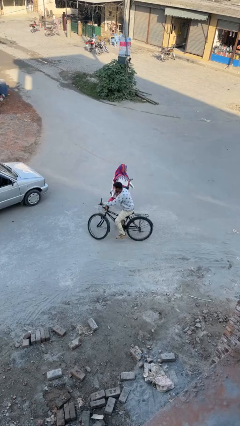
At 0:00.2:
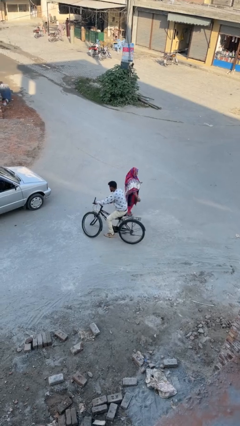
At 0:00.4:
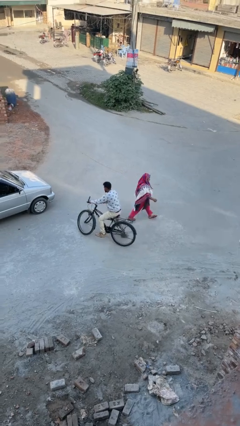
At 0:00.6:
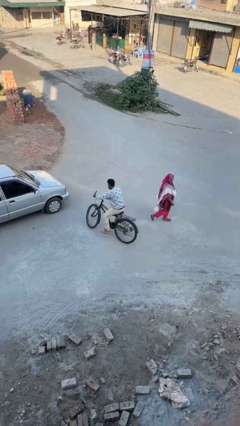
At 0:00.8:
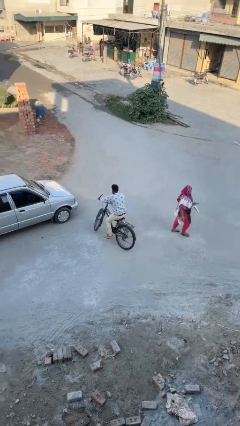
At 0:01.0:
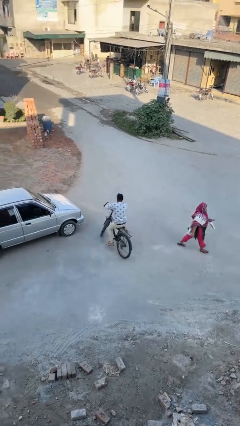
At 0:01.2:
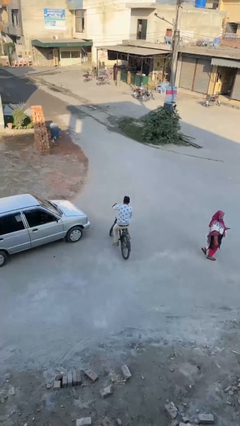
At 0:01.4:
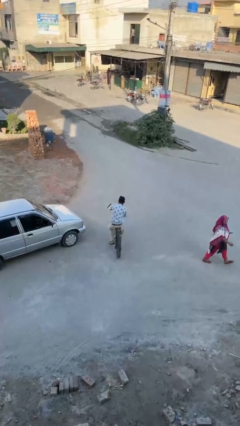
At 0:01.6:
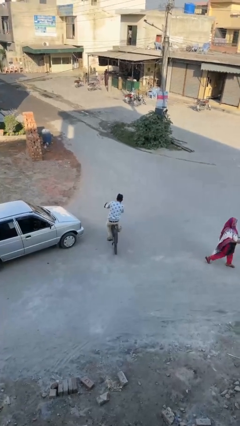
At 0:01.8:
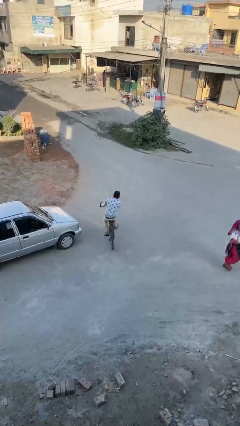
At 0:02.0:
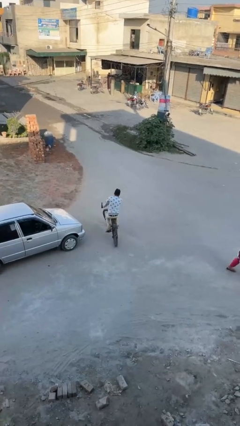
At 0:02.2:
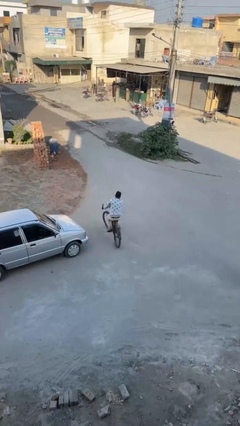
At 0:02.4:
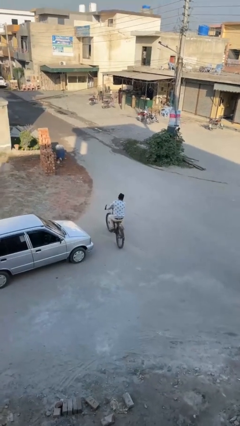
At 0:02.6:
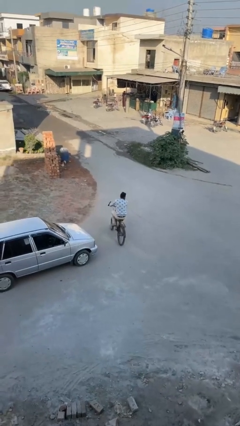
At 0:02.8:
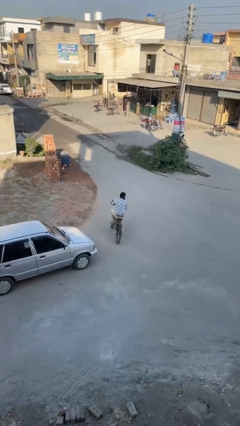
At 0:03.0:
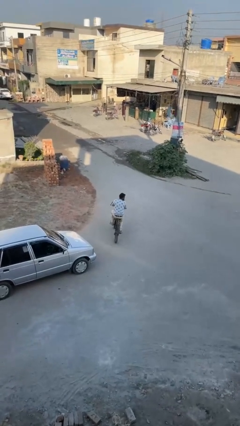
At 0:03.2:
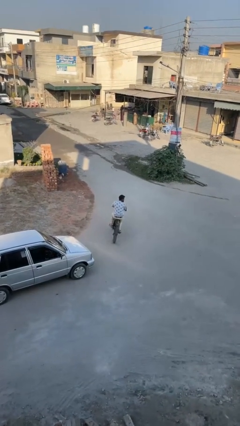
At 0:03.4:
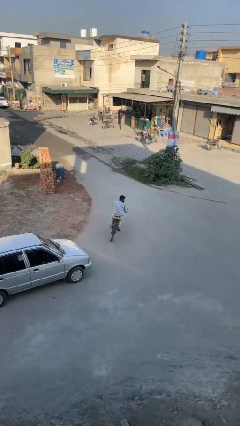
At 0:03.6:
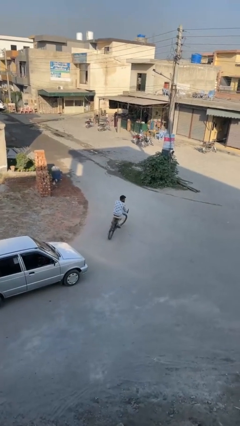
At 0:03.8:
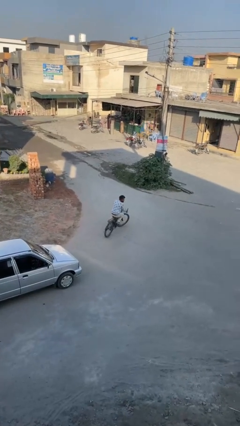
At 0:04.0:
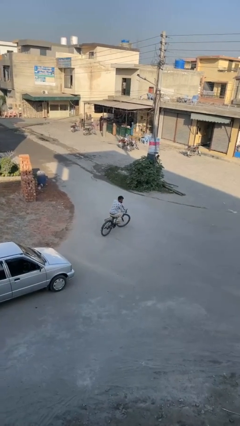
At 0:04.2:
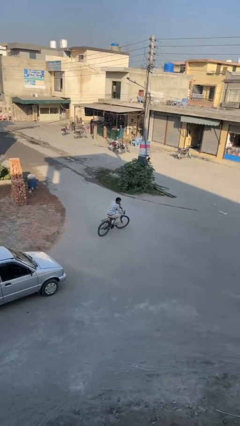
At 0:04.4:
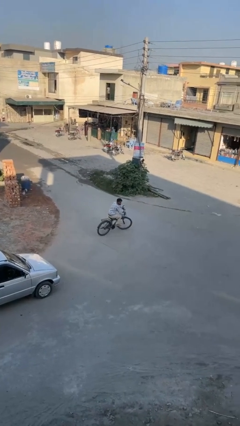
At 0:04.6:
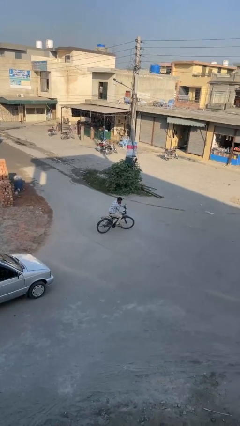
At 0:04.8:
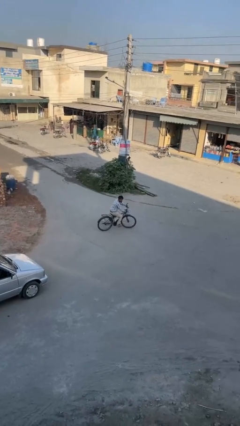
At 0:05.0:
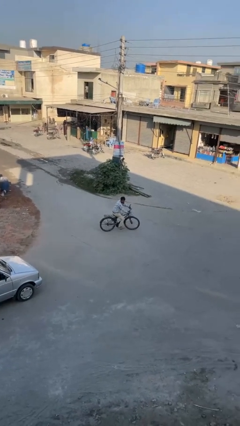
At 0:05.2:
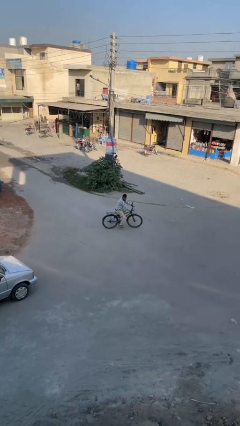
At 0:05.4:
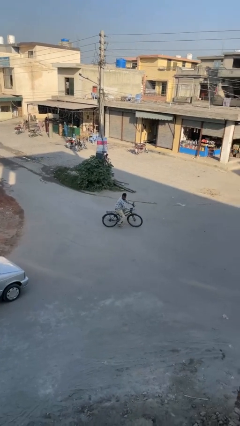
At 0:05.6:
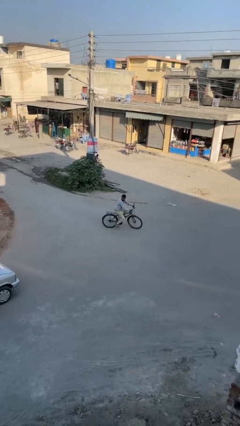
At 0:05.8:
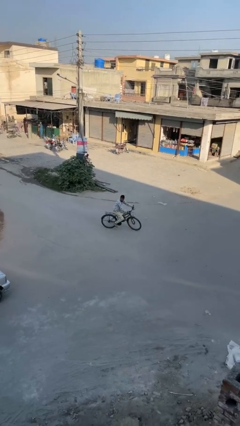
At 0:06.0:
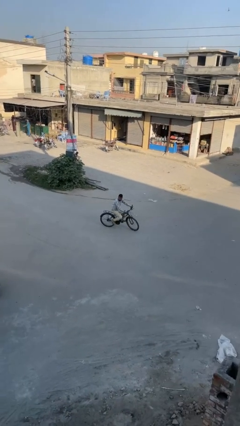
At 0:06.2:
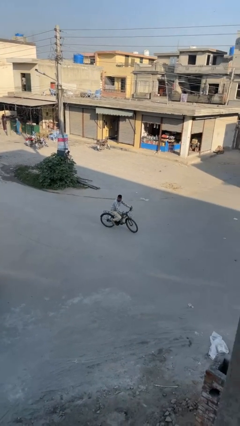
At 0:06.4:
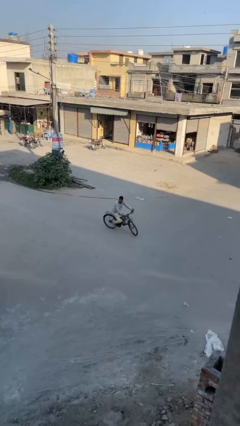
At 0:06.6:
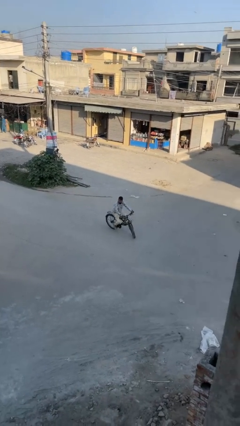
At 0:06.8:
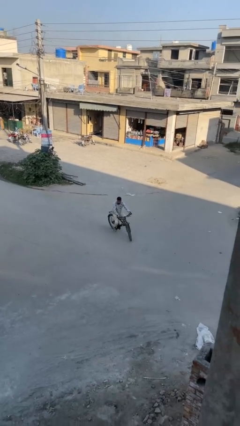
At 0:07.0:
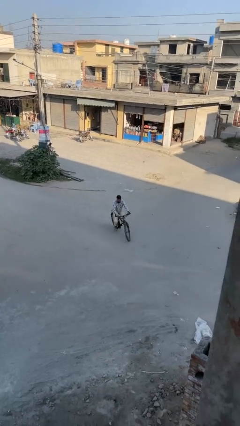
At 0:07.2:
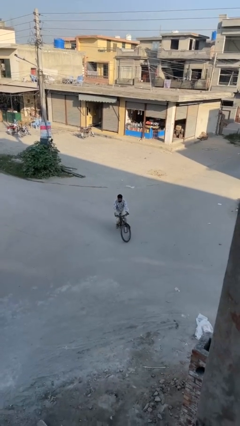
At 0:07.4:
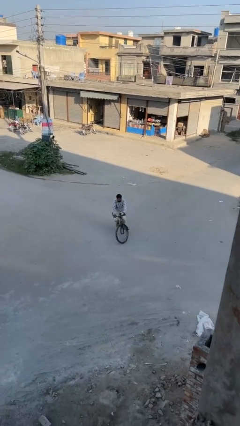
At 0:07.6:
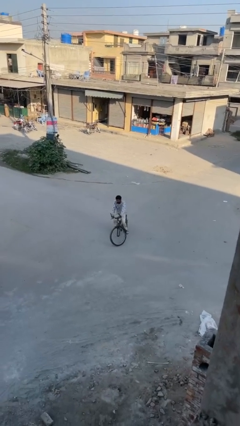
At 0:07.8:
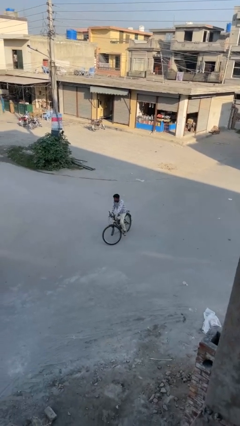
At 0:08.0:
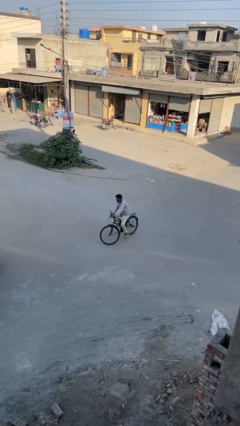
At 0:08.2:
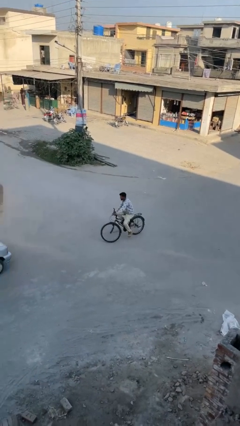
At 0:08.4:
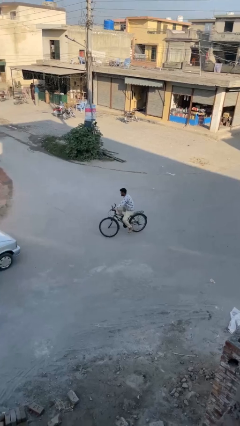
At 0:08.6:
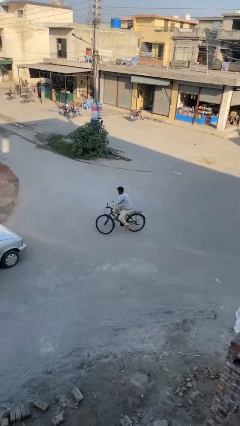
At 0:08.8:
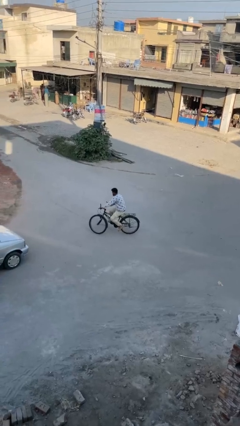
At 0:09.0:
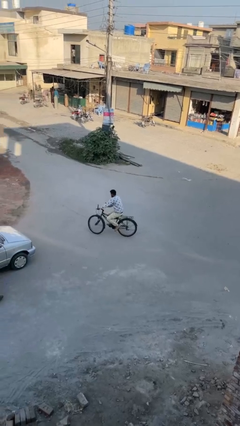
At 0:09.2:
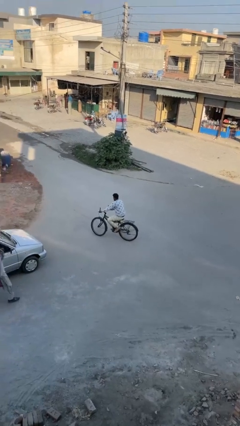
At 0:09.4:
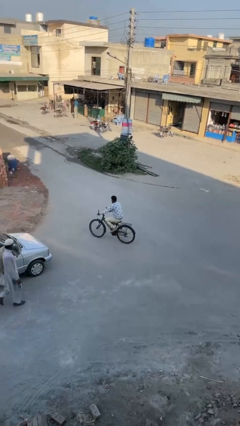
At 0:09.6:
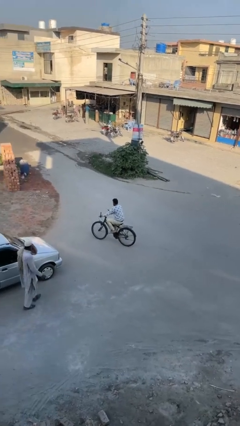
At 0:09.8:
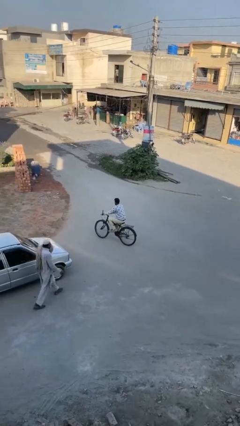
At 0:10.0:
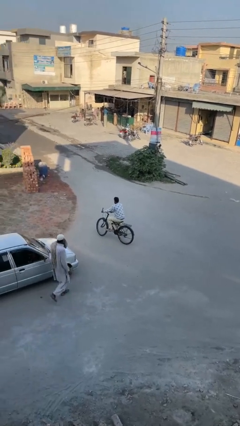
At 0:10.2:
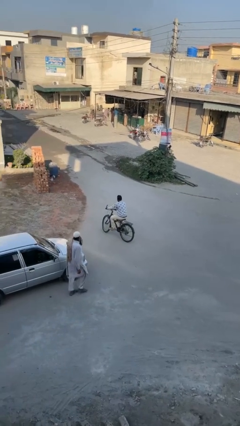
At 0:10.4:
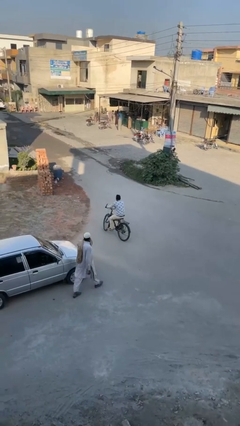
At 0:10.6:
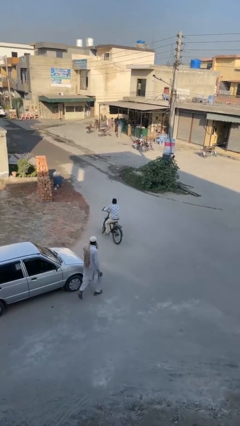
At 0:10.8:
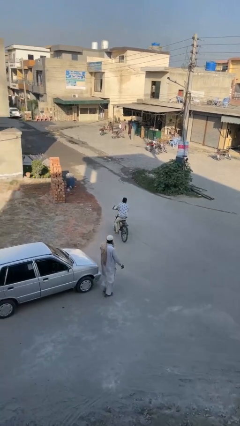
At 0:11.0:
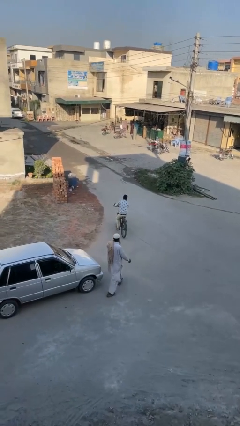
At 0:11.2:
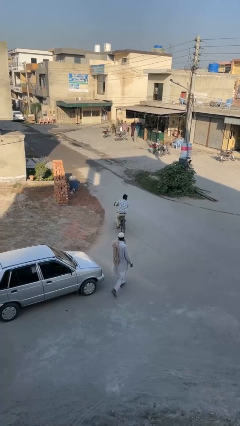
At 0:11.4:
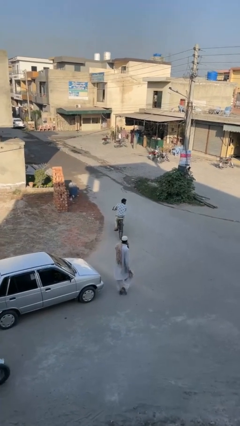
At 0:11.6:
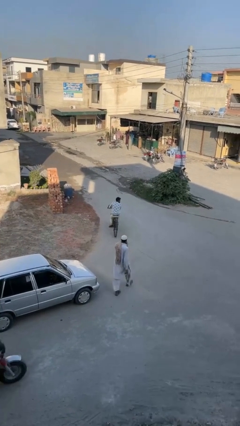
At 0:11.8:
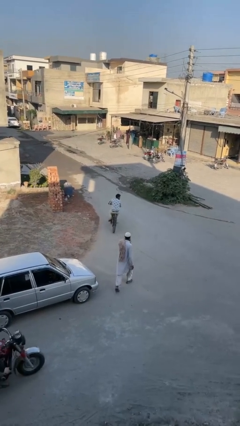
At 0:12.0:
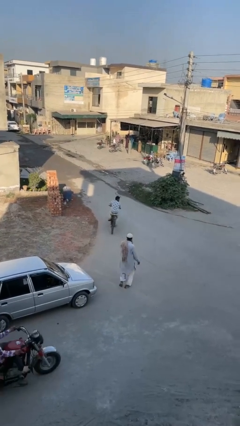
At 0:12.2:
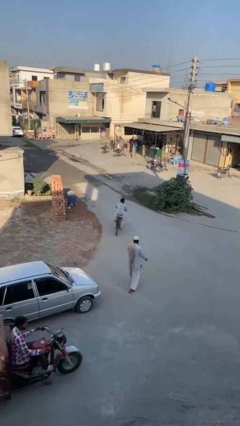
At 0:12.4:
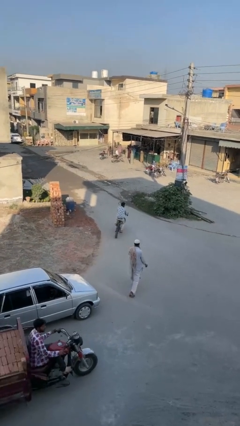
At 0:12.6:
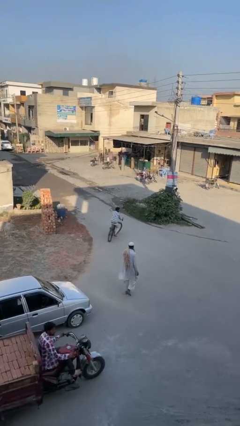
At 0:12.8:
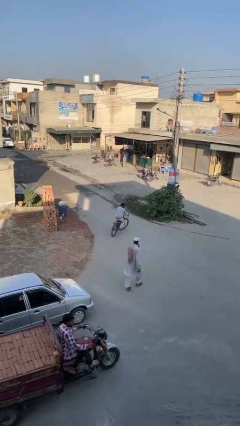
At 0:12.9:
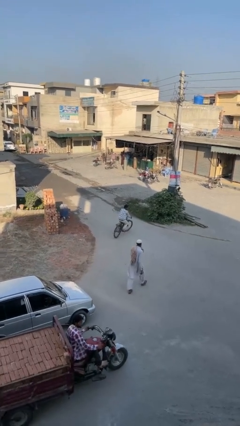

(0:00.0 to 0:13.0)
person rides bicycle

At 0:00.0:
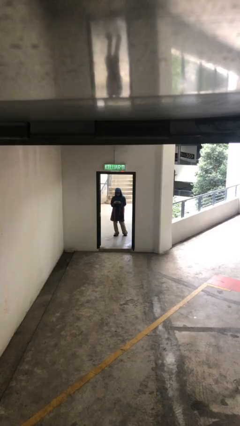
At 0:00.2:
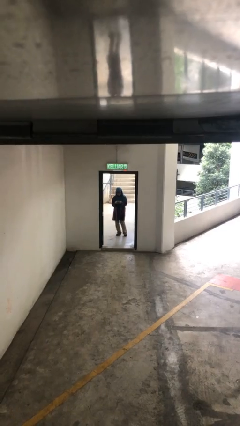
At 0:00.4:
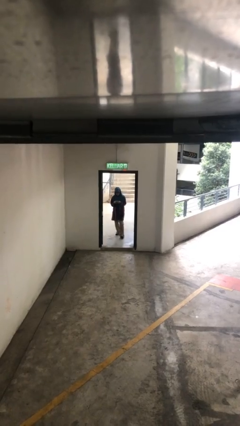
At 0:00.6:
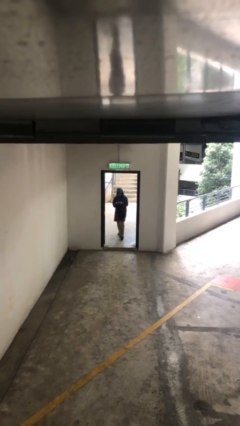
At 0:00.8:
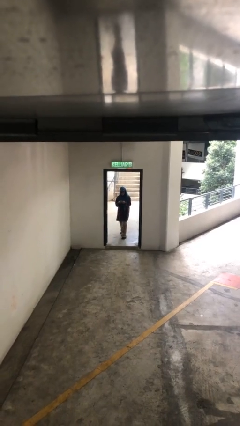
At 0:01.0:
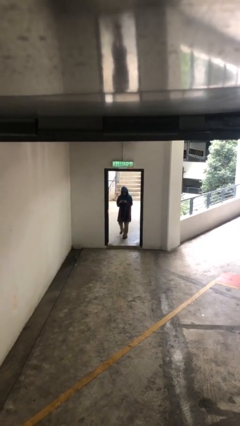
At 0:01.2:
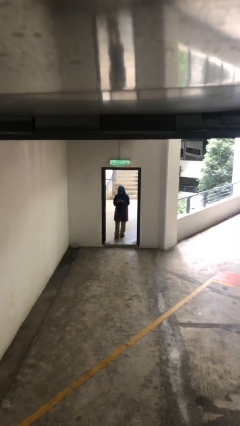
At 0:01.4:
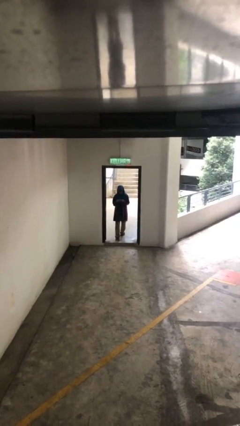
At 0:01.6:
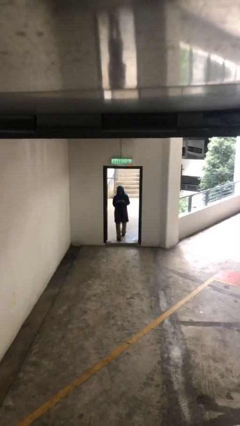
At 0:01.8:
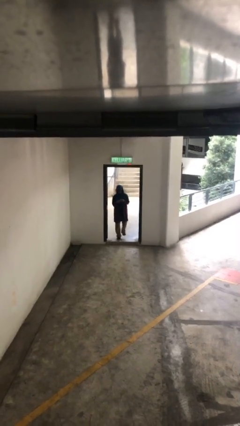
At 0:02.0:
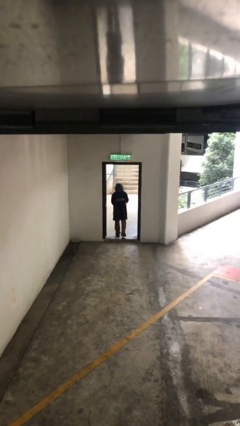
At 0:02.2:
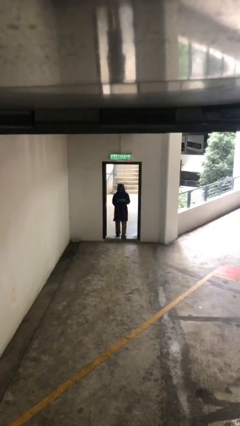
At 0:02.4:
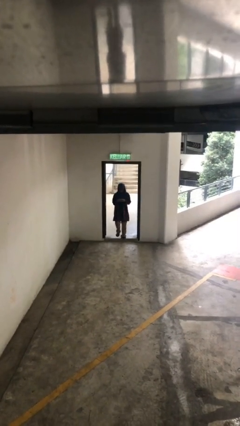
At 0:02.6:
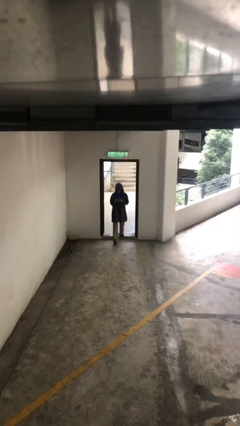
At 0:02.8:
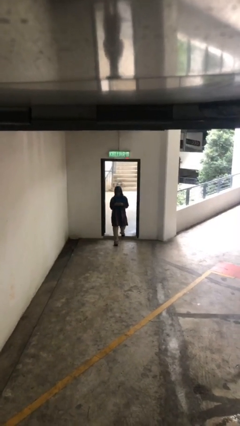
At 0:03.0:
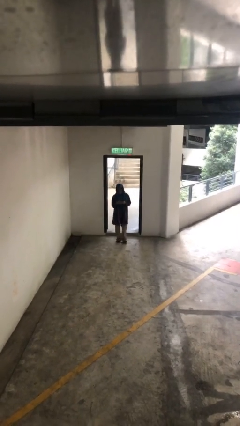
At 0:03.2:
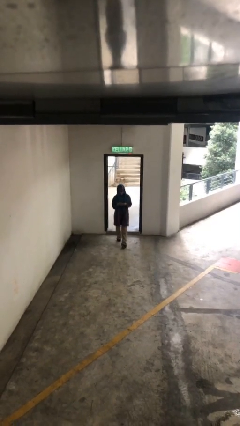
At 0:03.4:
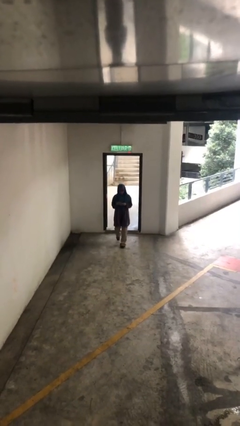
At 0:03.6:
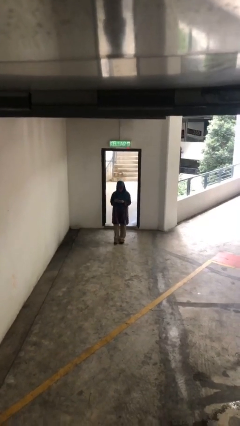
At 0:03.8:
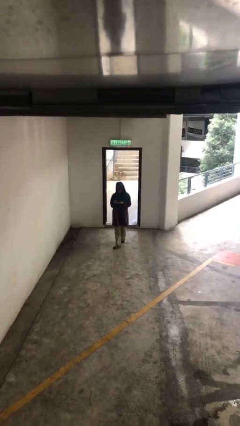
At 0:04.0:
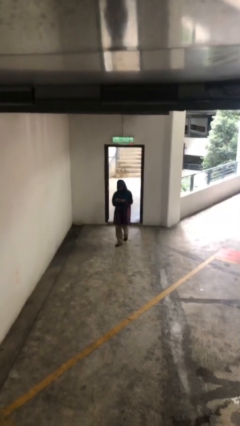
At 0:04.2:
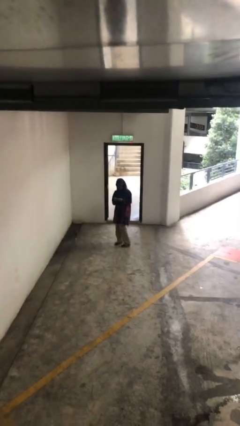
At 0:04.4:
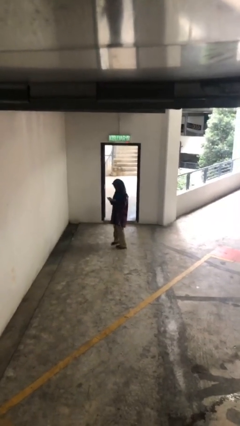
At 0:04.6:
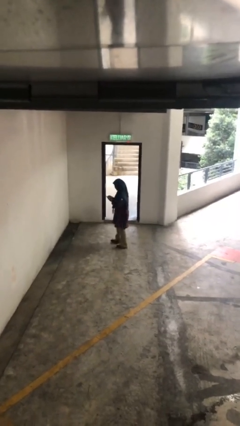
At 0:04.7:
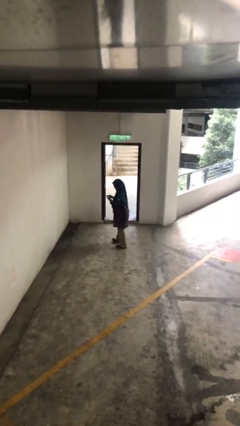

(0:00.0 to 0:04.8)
person enters scene through structure

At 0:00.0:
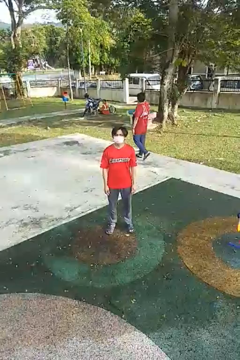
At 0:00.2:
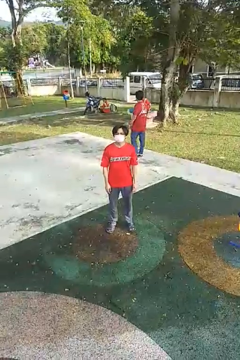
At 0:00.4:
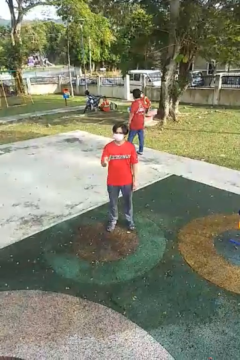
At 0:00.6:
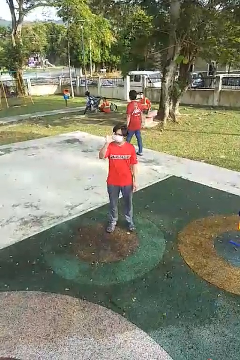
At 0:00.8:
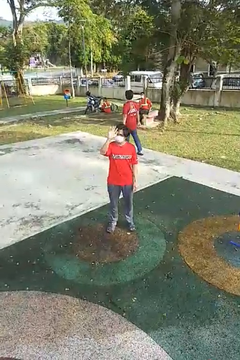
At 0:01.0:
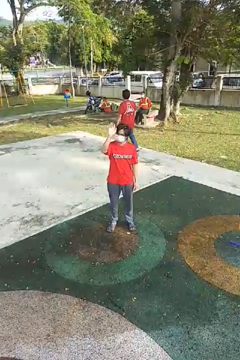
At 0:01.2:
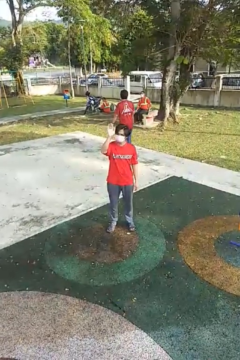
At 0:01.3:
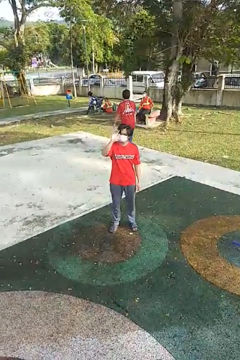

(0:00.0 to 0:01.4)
person waves at person
